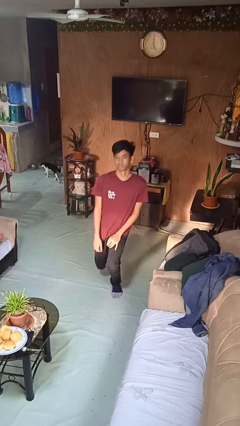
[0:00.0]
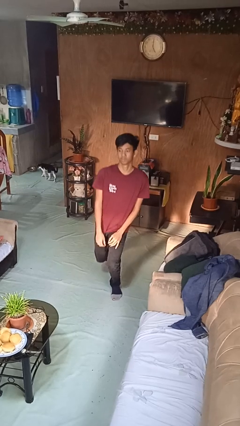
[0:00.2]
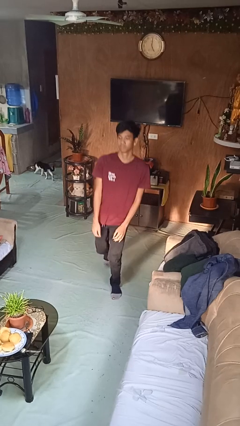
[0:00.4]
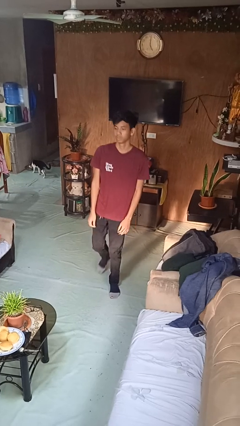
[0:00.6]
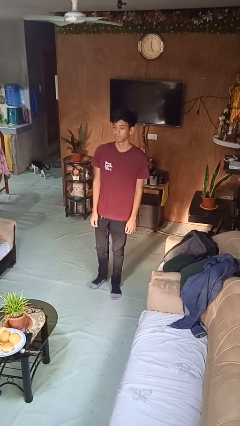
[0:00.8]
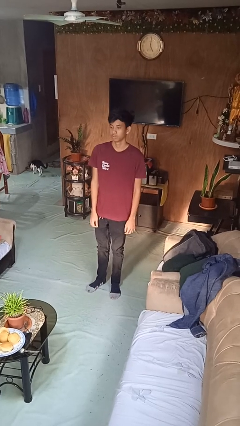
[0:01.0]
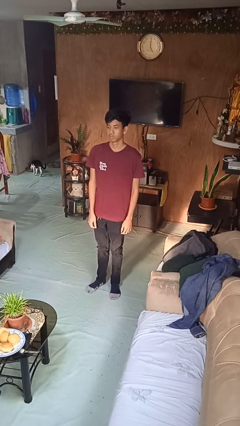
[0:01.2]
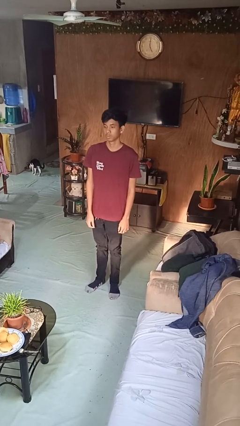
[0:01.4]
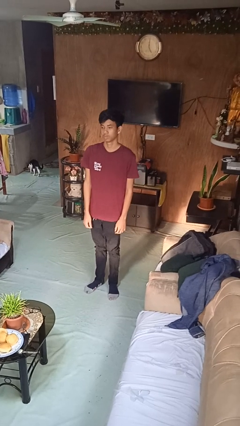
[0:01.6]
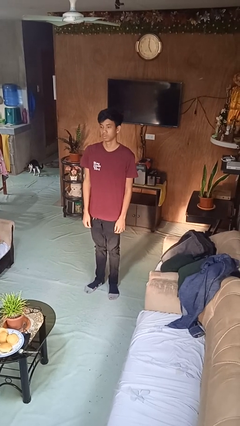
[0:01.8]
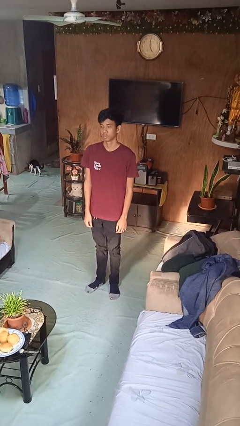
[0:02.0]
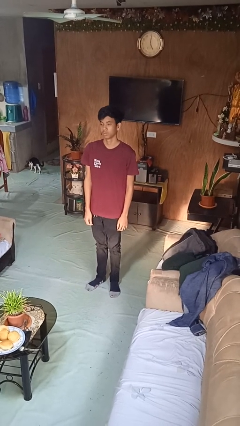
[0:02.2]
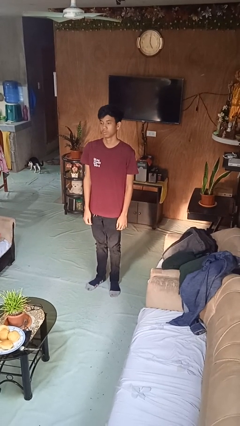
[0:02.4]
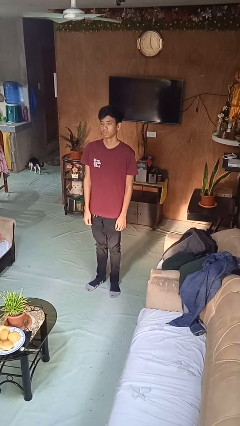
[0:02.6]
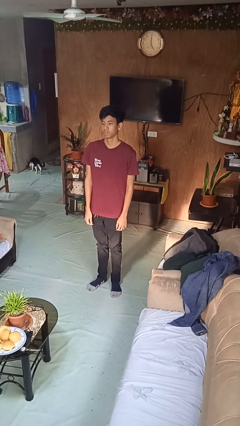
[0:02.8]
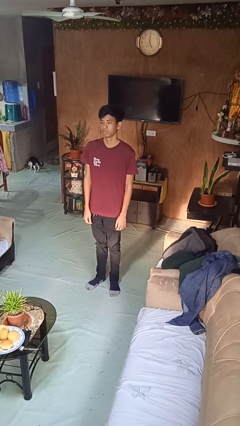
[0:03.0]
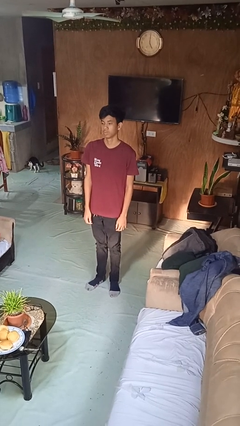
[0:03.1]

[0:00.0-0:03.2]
person stands up from floor

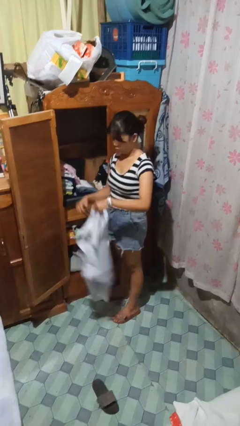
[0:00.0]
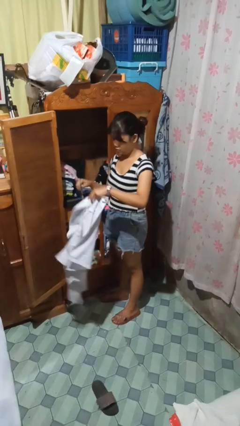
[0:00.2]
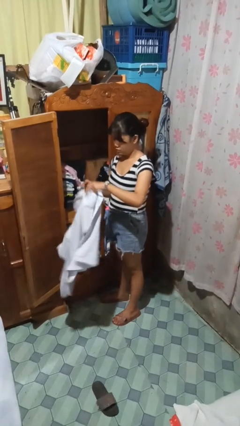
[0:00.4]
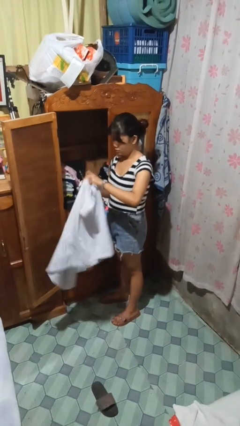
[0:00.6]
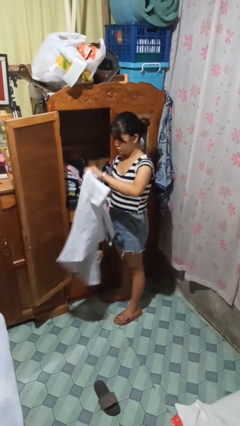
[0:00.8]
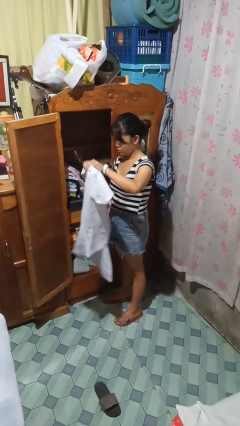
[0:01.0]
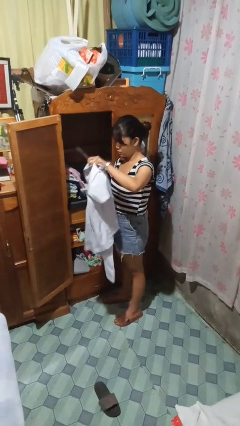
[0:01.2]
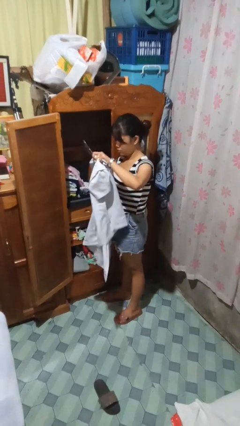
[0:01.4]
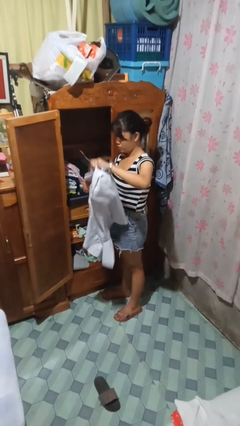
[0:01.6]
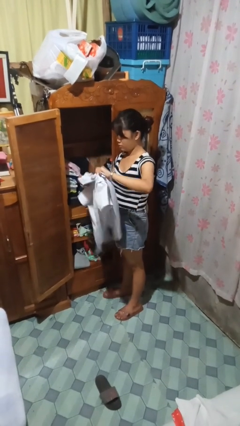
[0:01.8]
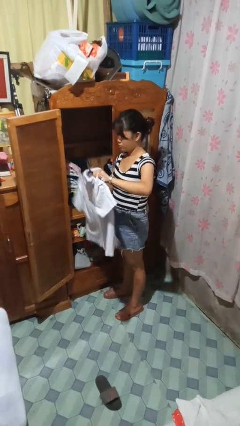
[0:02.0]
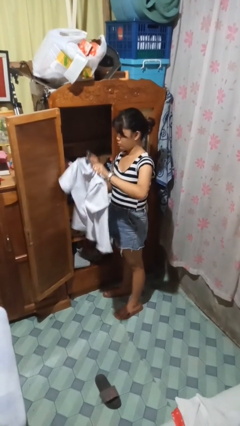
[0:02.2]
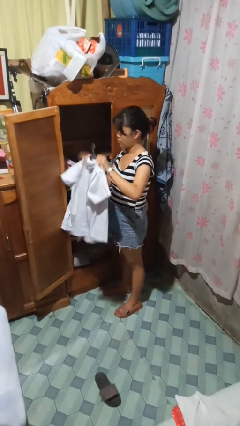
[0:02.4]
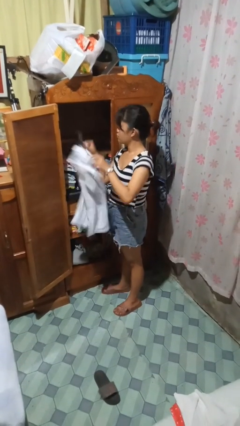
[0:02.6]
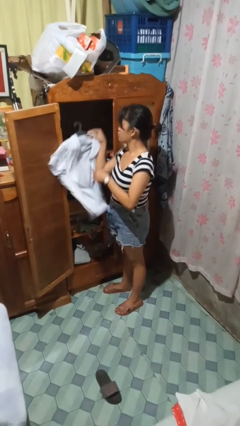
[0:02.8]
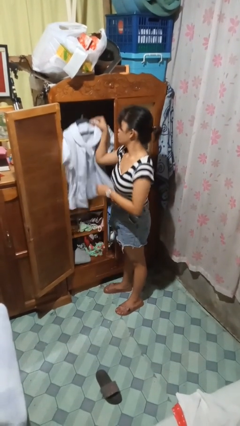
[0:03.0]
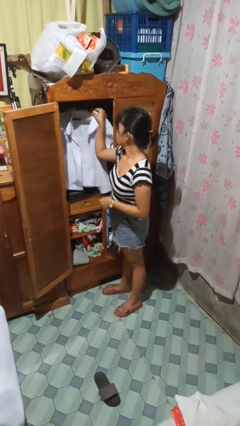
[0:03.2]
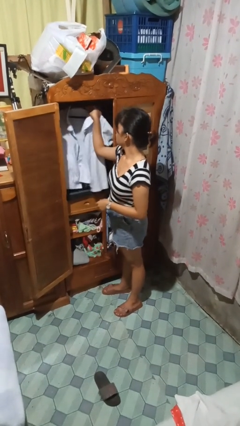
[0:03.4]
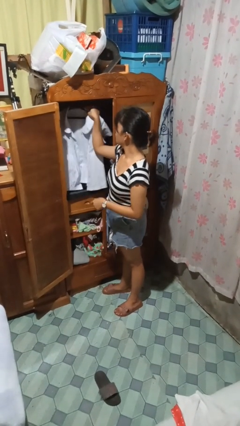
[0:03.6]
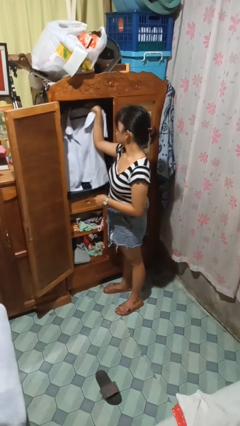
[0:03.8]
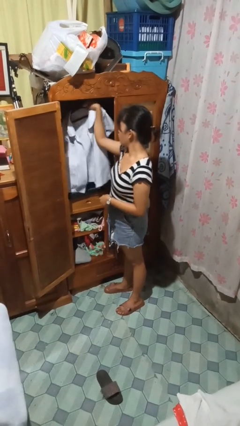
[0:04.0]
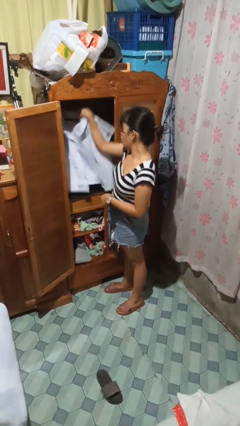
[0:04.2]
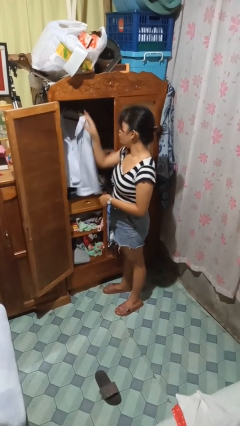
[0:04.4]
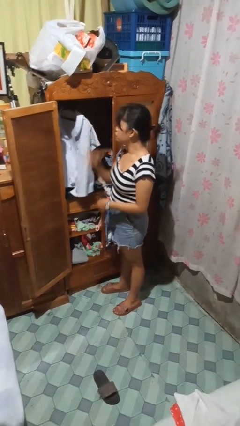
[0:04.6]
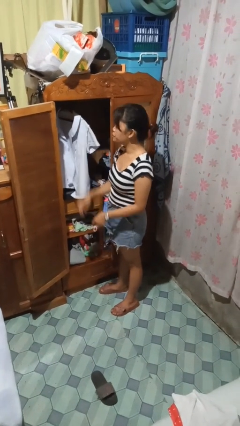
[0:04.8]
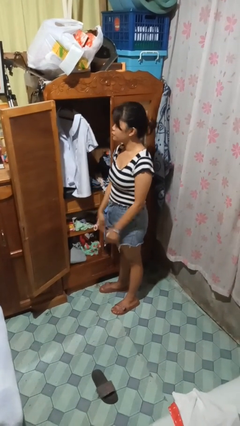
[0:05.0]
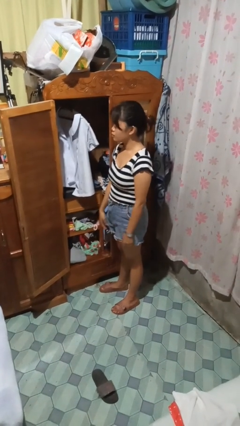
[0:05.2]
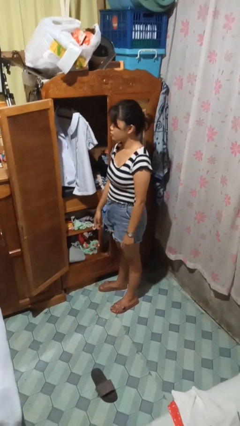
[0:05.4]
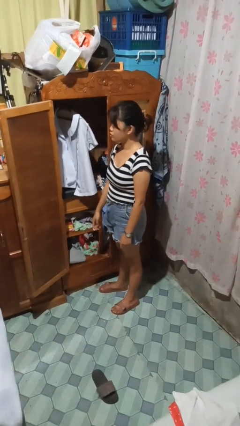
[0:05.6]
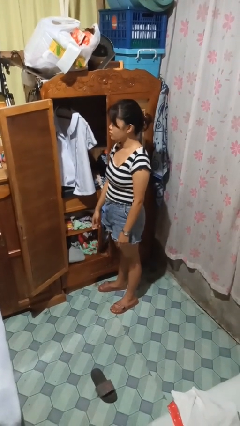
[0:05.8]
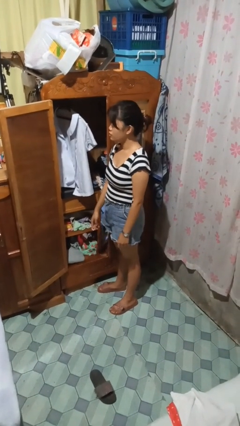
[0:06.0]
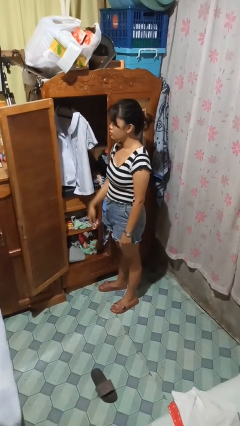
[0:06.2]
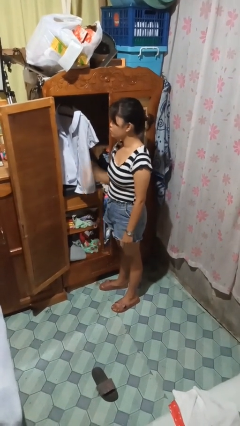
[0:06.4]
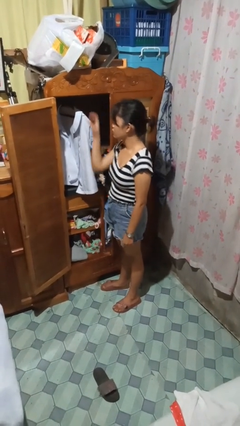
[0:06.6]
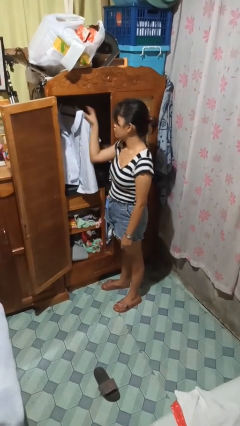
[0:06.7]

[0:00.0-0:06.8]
person puts clothes into closet

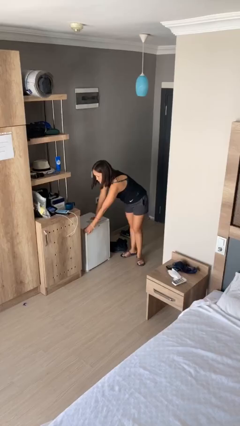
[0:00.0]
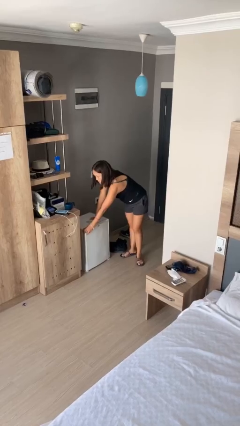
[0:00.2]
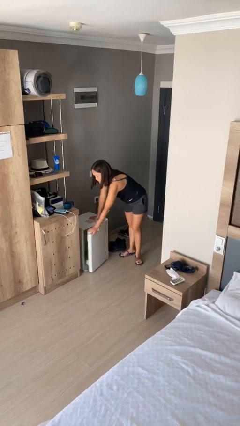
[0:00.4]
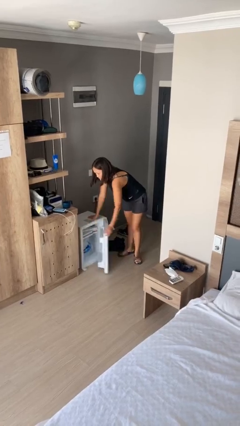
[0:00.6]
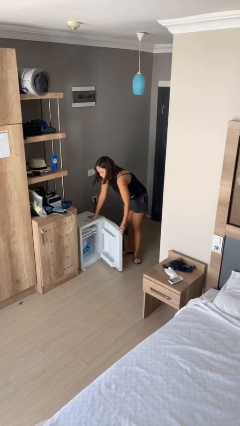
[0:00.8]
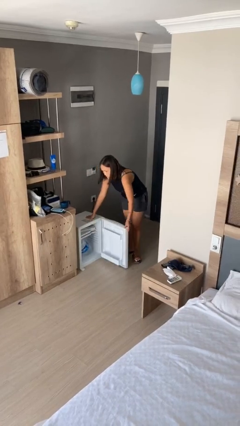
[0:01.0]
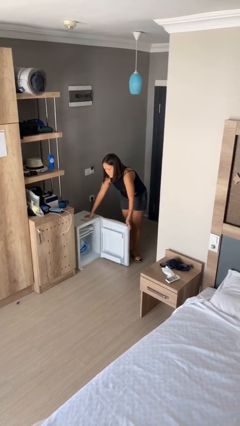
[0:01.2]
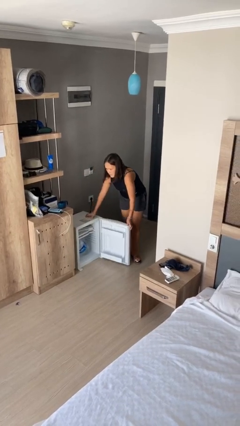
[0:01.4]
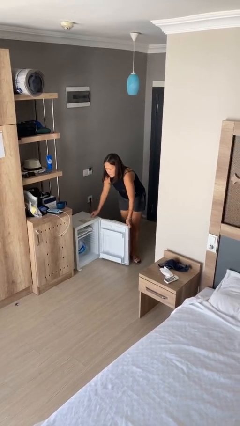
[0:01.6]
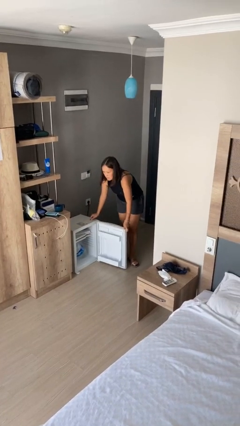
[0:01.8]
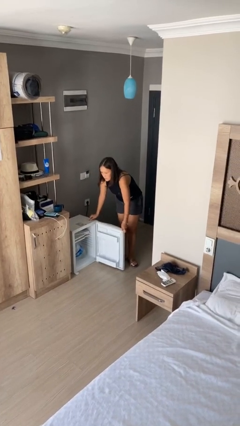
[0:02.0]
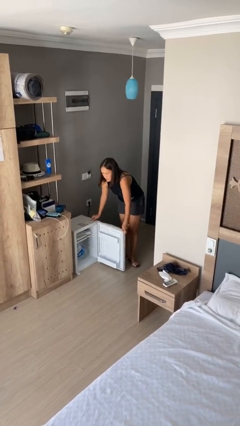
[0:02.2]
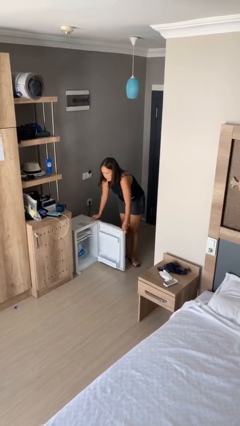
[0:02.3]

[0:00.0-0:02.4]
person opens refrigerator

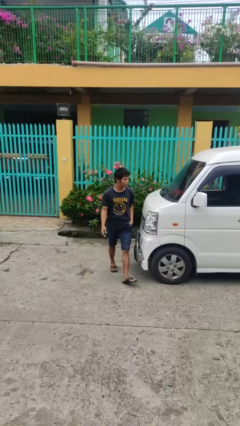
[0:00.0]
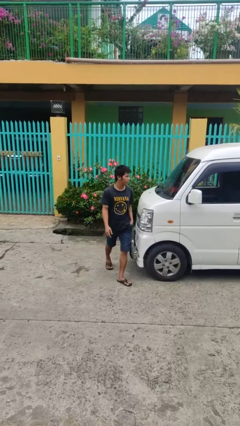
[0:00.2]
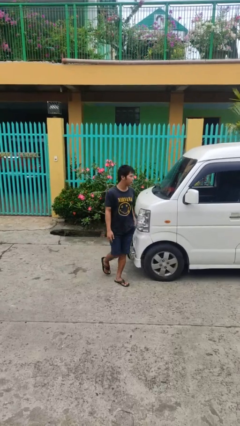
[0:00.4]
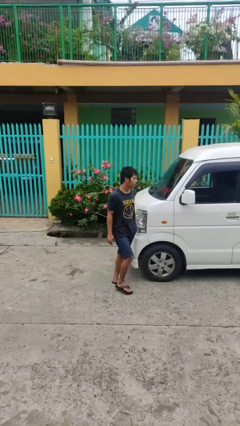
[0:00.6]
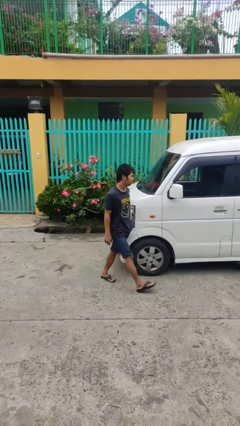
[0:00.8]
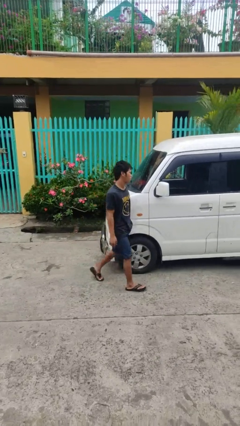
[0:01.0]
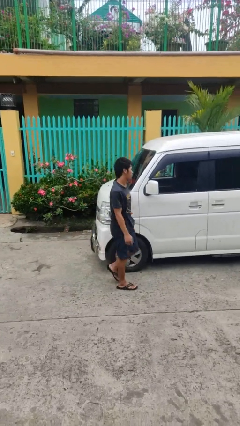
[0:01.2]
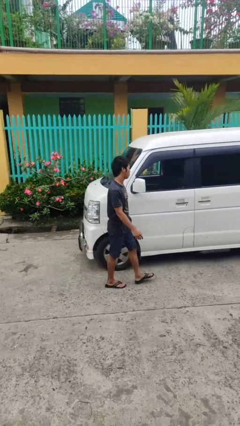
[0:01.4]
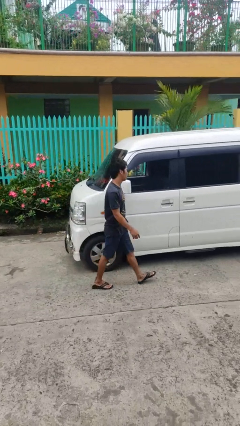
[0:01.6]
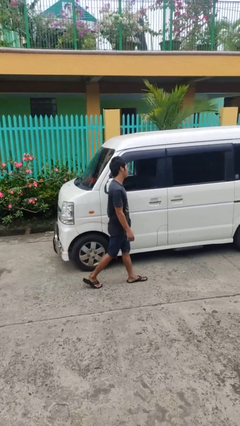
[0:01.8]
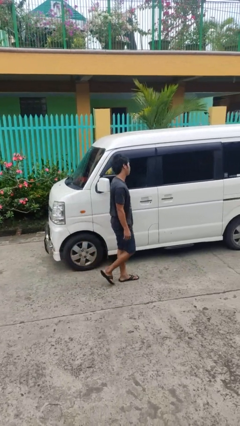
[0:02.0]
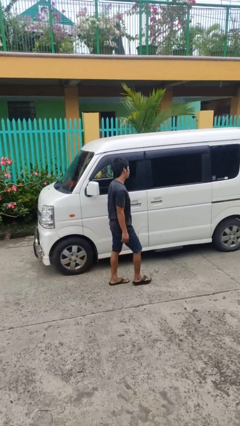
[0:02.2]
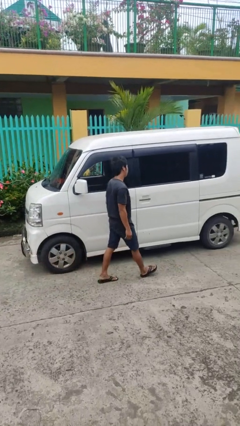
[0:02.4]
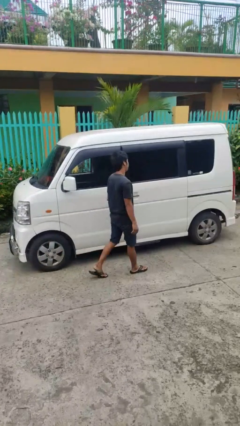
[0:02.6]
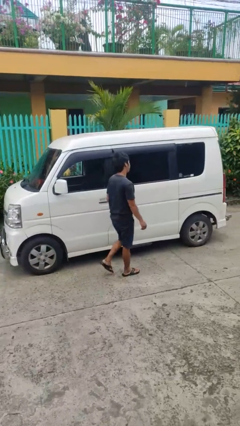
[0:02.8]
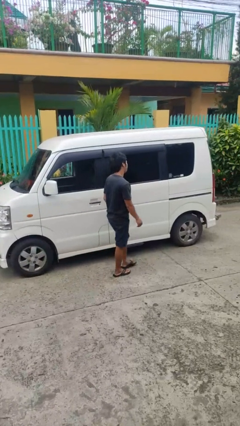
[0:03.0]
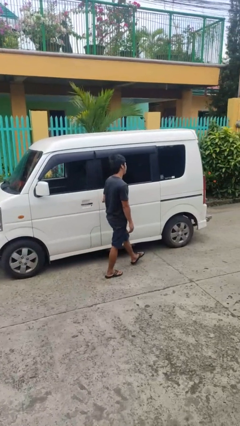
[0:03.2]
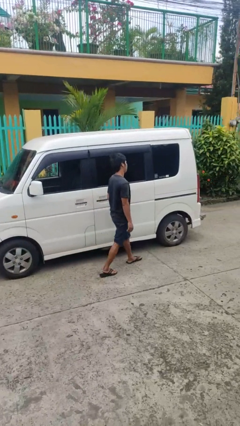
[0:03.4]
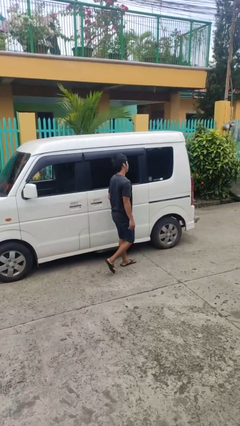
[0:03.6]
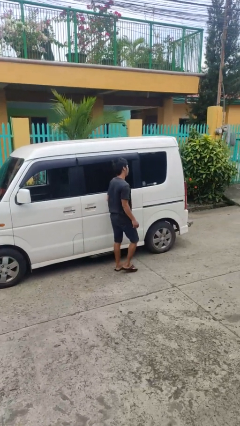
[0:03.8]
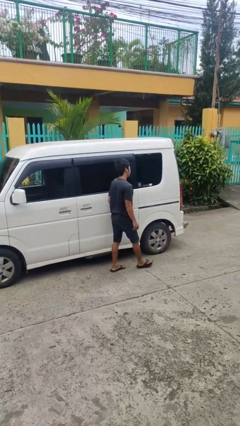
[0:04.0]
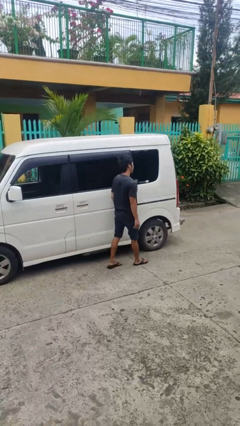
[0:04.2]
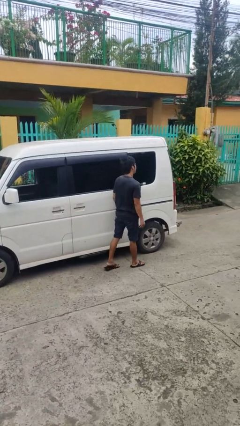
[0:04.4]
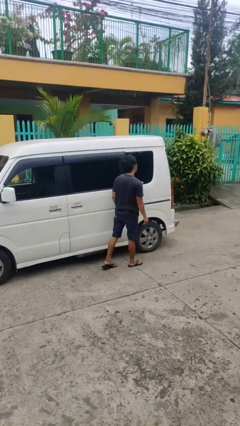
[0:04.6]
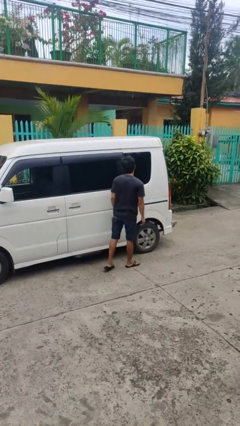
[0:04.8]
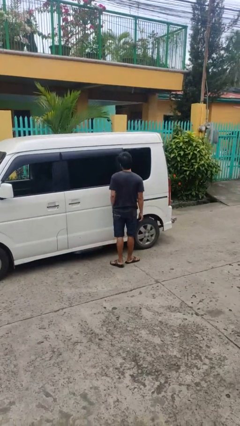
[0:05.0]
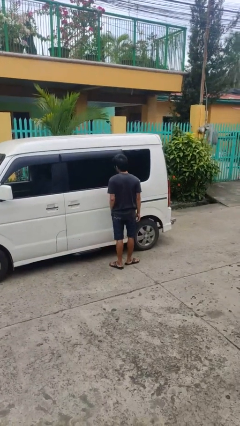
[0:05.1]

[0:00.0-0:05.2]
person walks around car

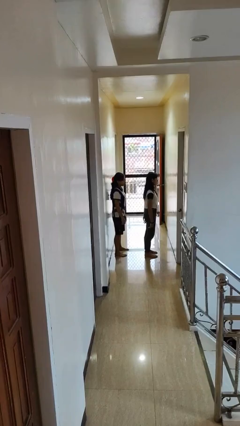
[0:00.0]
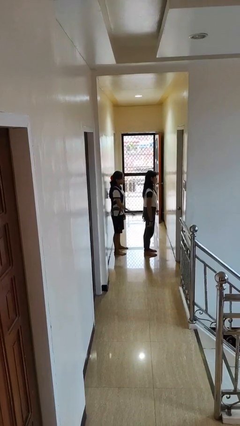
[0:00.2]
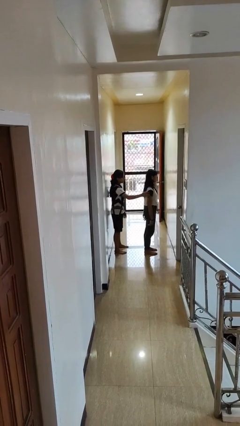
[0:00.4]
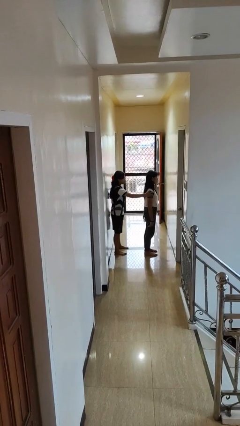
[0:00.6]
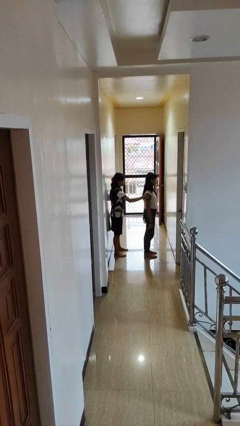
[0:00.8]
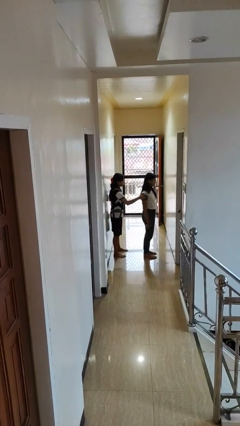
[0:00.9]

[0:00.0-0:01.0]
person grabs person by shoulder
